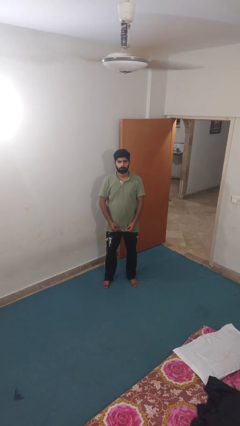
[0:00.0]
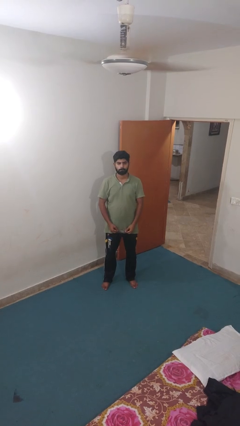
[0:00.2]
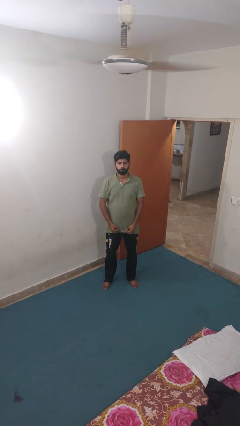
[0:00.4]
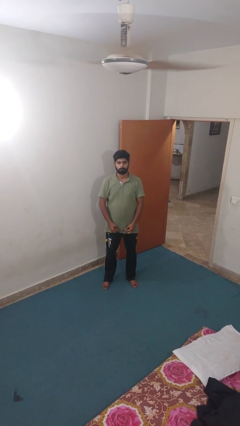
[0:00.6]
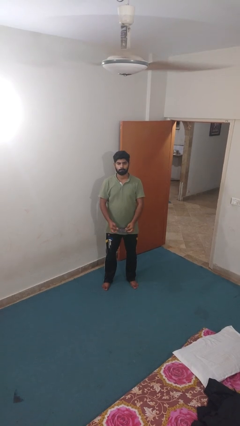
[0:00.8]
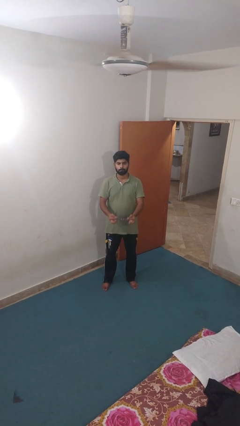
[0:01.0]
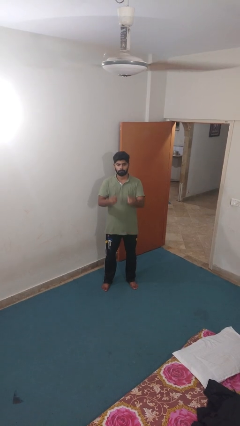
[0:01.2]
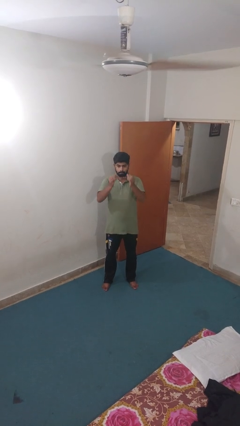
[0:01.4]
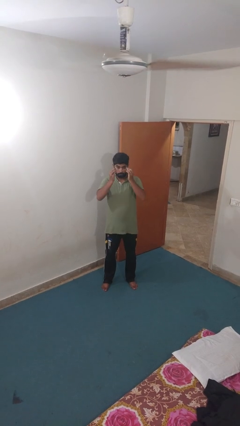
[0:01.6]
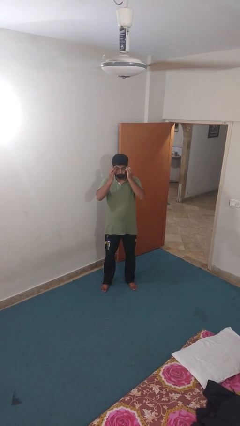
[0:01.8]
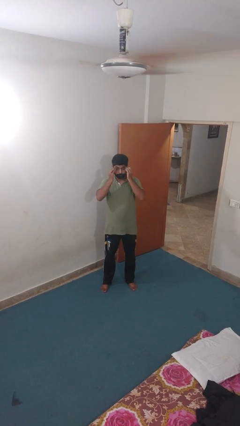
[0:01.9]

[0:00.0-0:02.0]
person puts on glasses

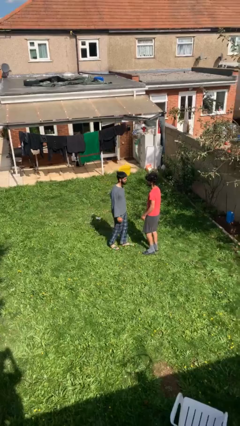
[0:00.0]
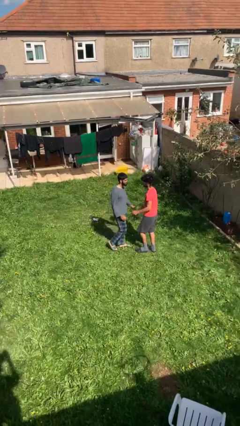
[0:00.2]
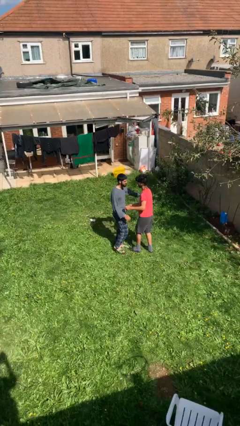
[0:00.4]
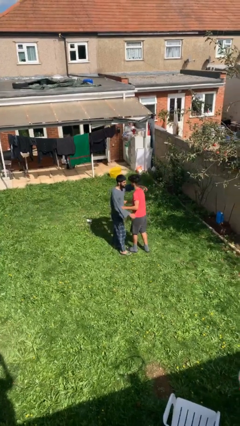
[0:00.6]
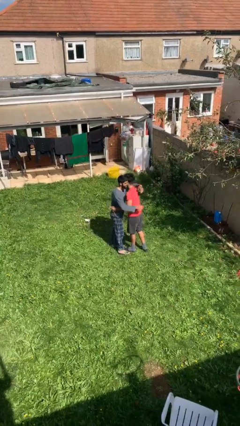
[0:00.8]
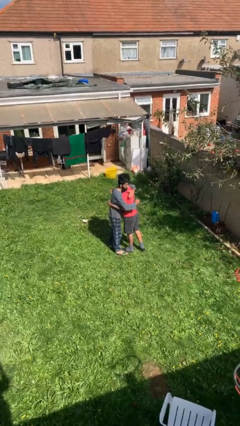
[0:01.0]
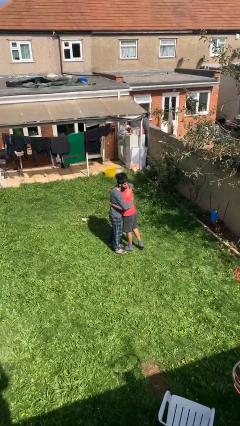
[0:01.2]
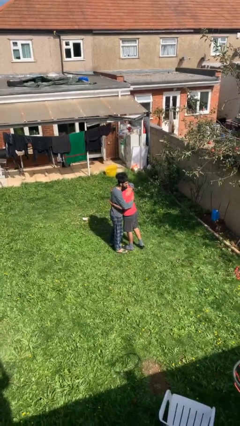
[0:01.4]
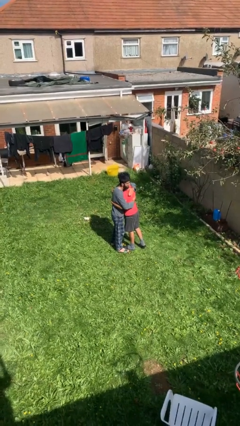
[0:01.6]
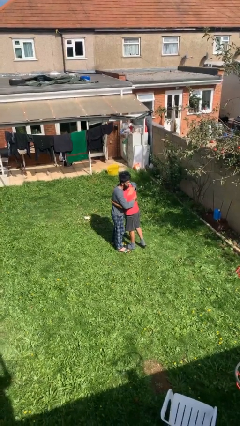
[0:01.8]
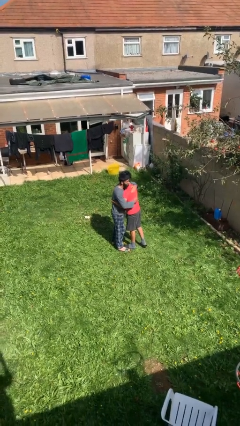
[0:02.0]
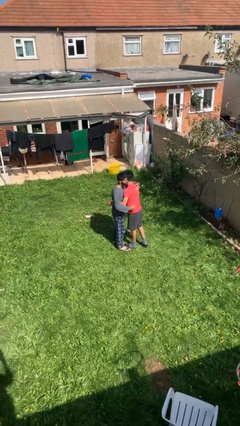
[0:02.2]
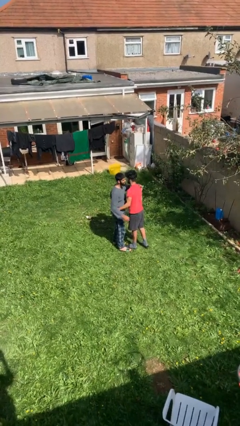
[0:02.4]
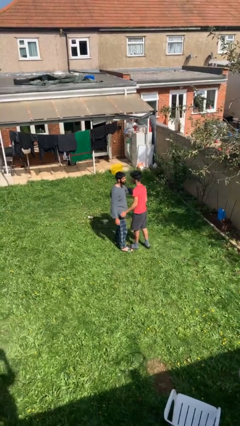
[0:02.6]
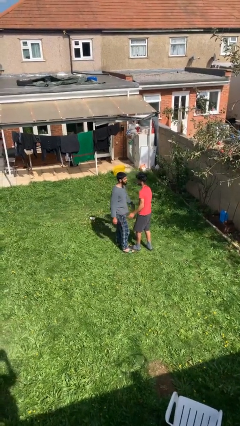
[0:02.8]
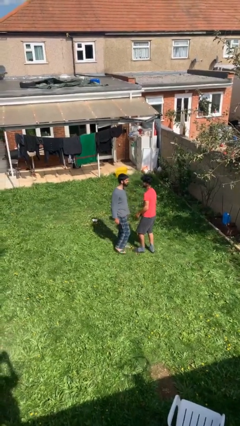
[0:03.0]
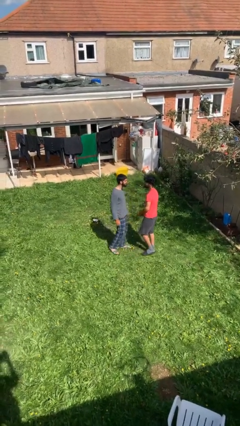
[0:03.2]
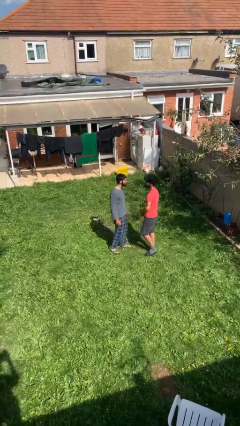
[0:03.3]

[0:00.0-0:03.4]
person embraces person

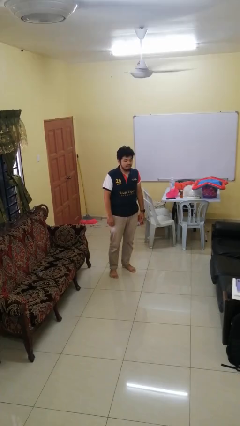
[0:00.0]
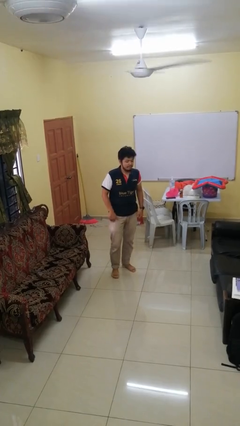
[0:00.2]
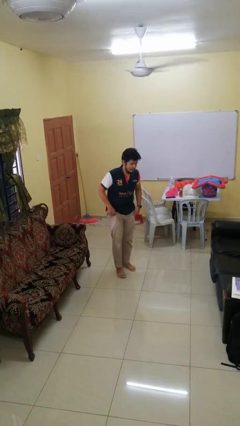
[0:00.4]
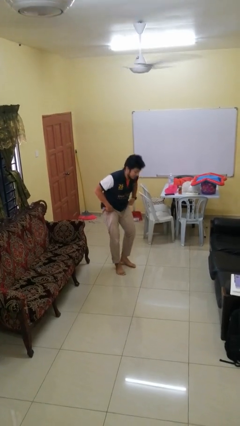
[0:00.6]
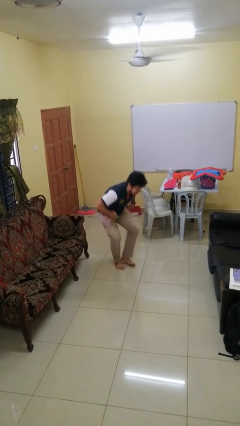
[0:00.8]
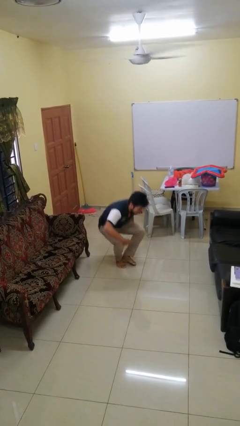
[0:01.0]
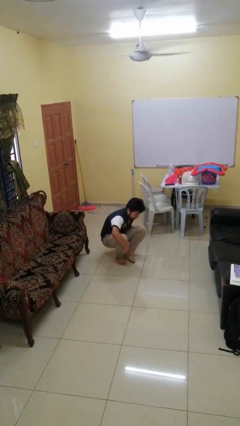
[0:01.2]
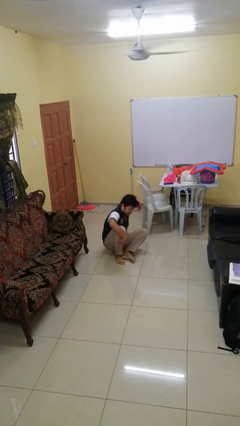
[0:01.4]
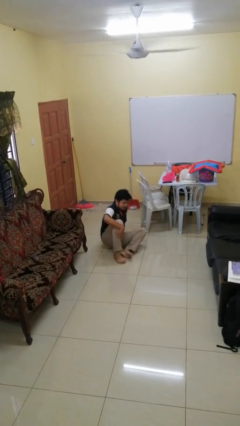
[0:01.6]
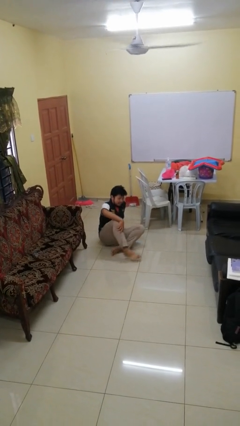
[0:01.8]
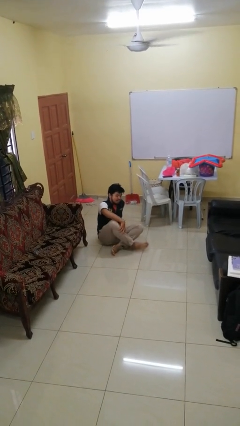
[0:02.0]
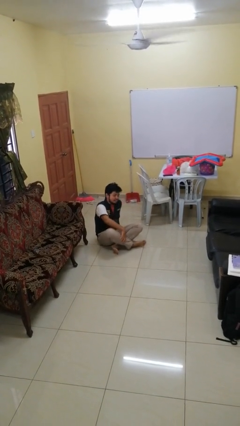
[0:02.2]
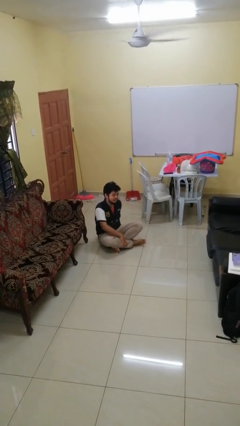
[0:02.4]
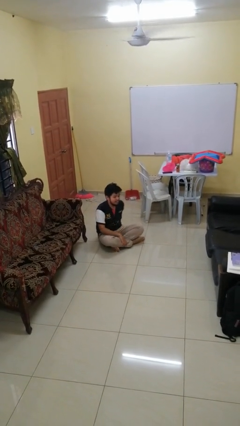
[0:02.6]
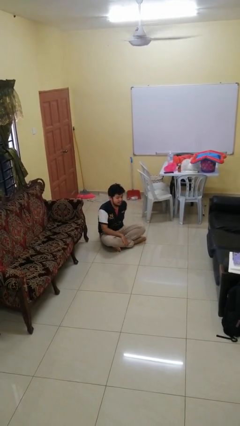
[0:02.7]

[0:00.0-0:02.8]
person sits crisscross

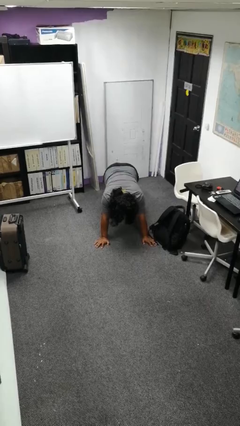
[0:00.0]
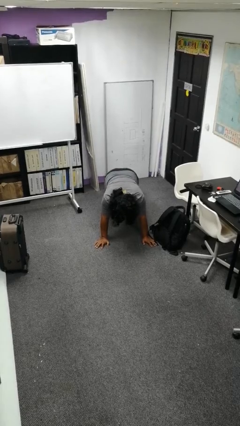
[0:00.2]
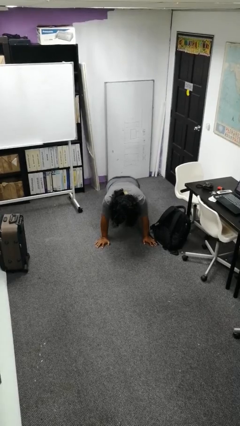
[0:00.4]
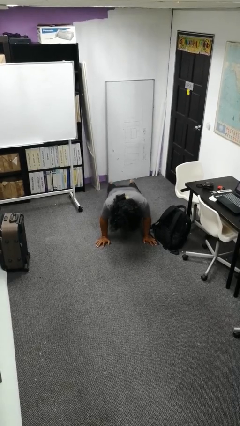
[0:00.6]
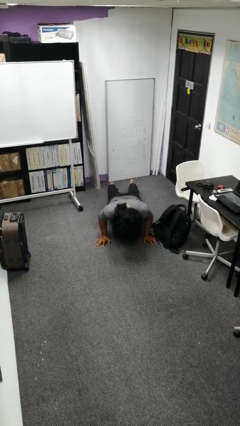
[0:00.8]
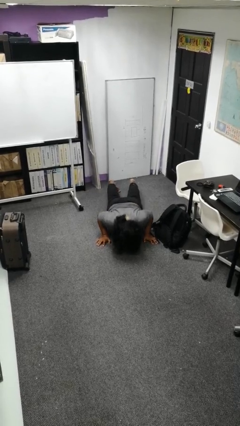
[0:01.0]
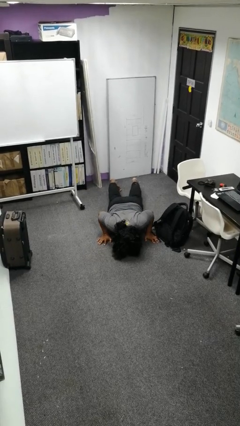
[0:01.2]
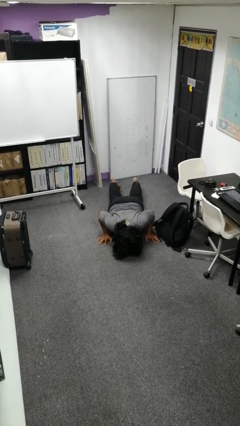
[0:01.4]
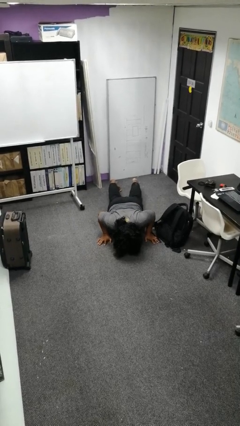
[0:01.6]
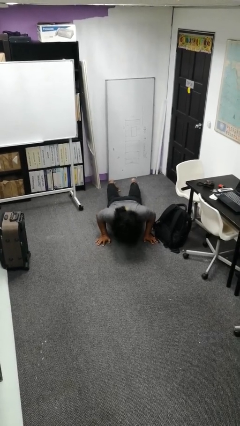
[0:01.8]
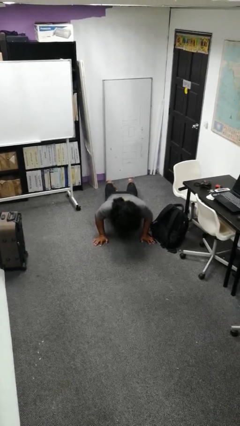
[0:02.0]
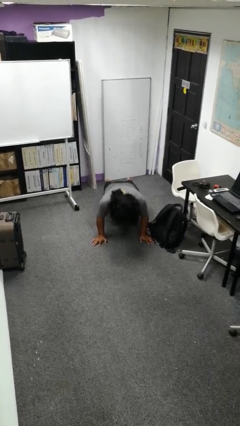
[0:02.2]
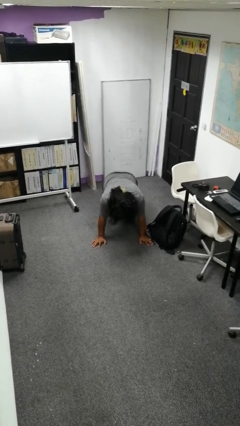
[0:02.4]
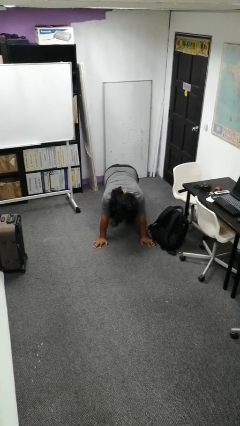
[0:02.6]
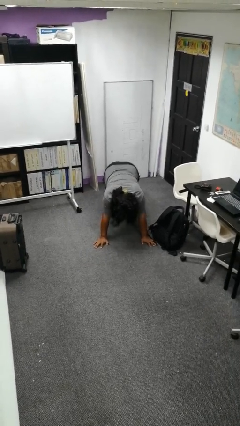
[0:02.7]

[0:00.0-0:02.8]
person exercises with pushup

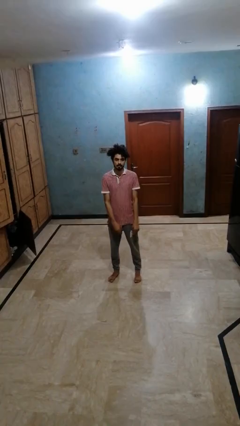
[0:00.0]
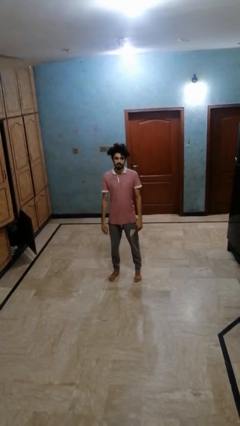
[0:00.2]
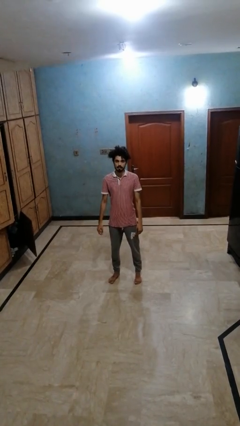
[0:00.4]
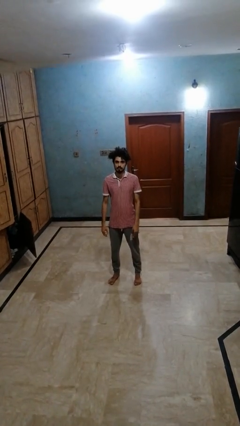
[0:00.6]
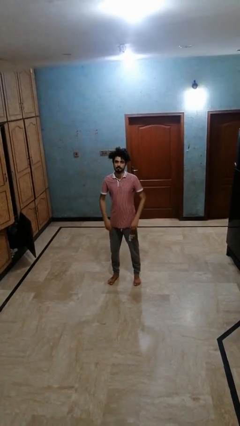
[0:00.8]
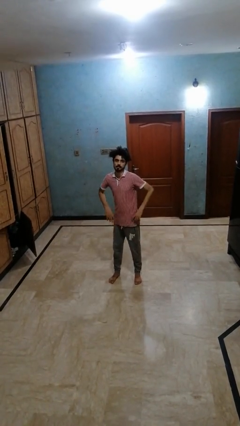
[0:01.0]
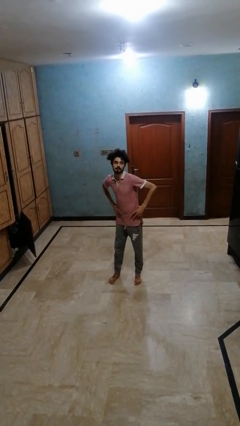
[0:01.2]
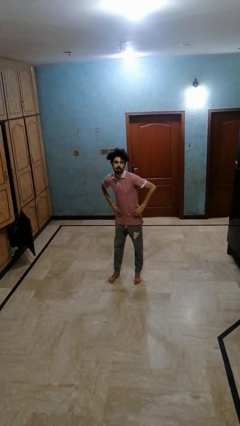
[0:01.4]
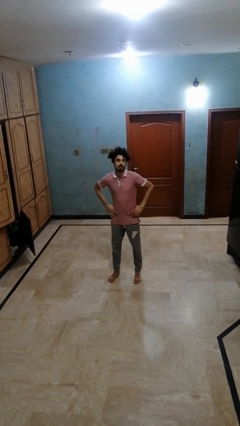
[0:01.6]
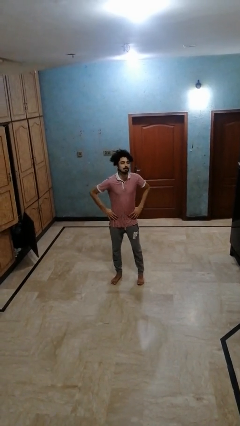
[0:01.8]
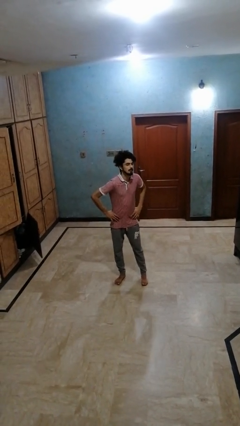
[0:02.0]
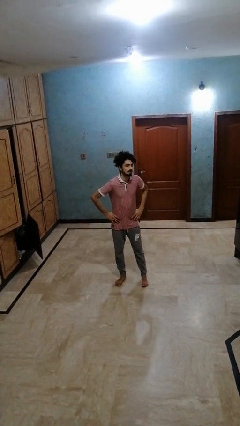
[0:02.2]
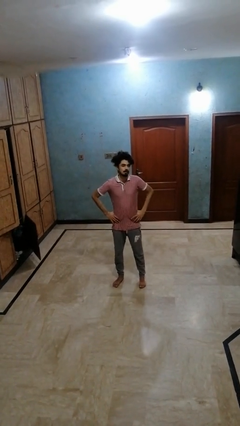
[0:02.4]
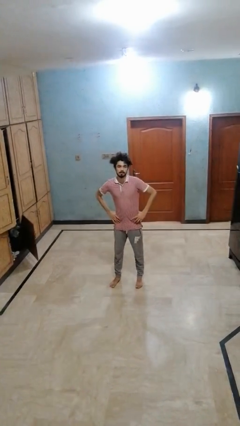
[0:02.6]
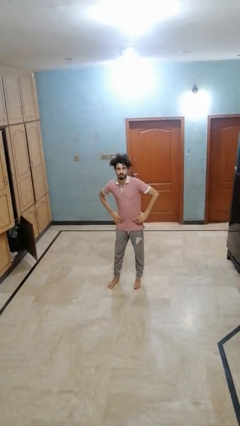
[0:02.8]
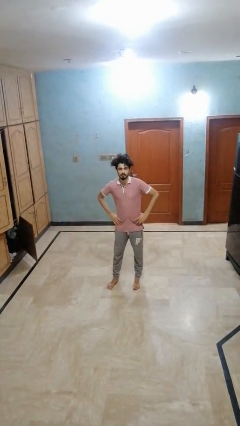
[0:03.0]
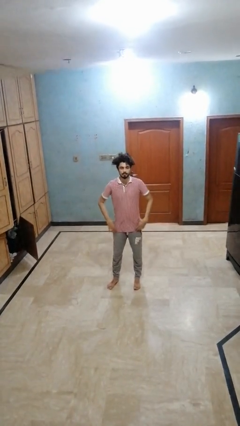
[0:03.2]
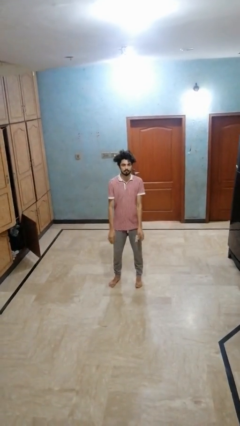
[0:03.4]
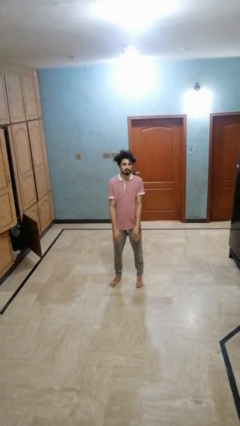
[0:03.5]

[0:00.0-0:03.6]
person wiggles hips

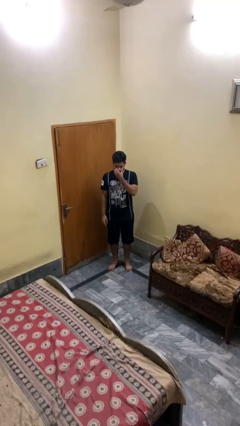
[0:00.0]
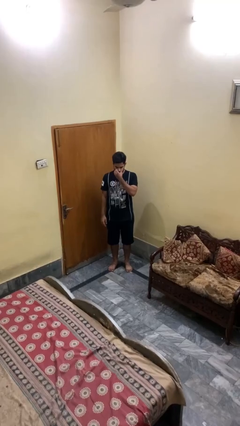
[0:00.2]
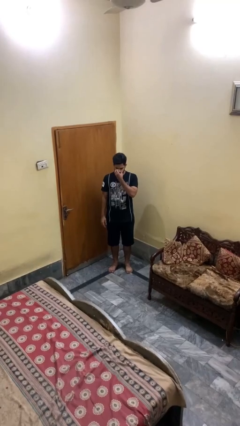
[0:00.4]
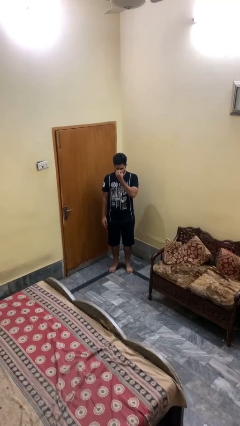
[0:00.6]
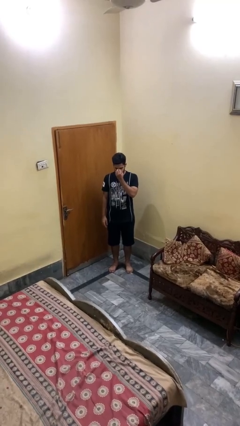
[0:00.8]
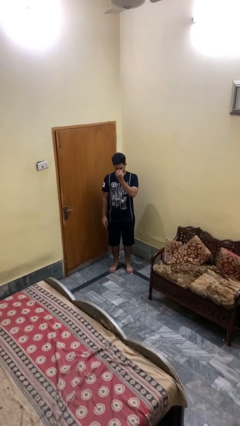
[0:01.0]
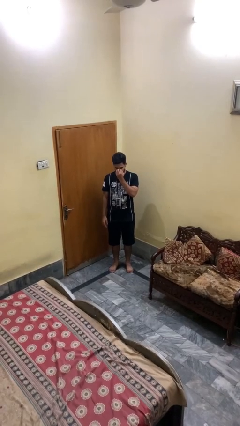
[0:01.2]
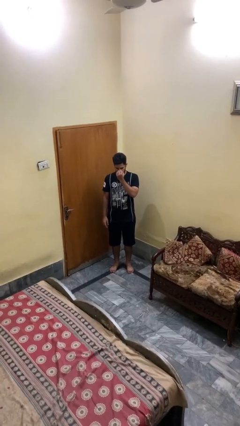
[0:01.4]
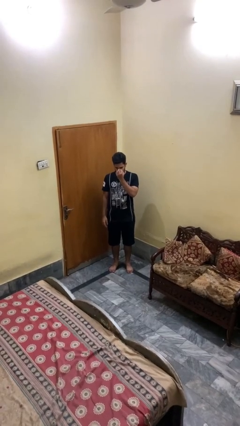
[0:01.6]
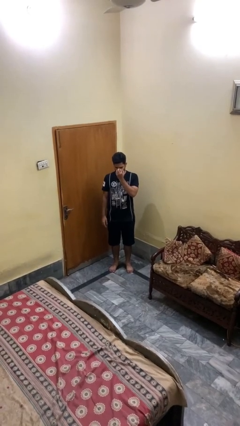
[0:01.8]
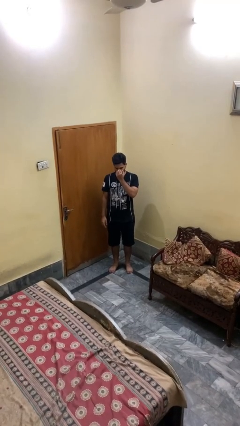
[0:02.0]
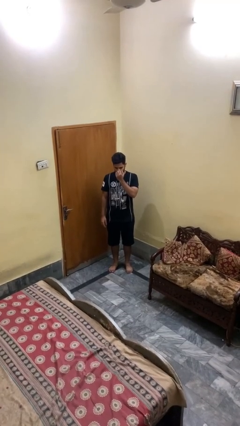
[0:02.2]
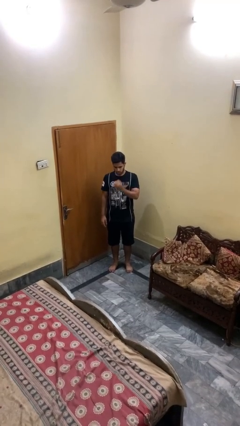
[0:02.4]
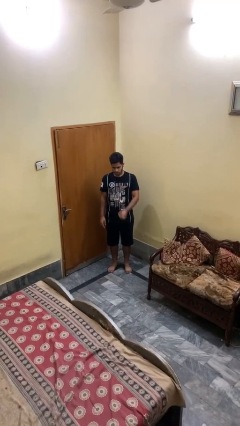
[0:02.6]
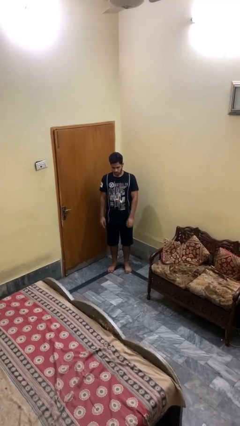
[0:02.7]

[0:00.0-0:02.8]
person scratches face
